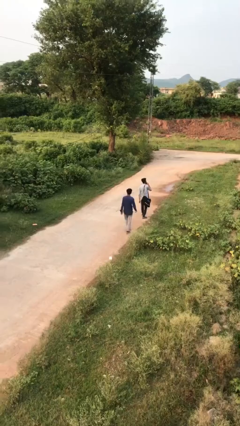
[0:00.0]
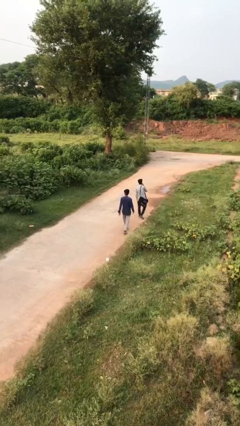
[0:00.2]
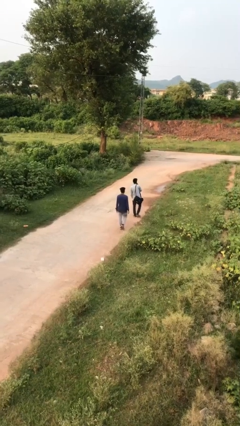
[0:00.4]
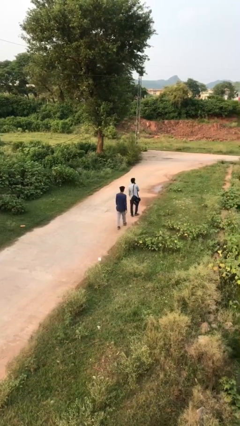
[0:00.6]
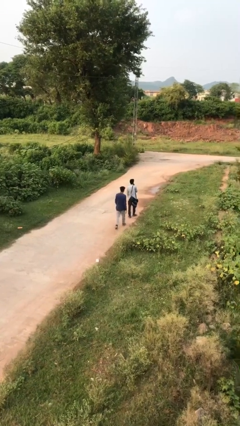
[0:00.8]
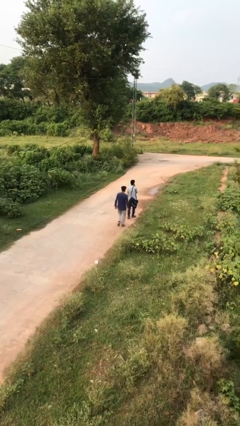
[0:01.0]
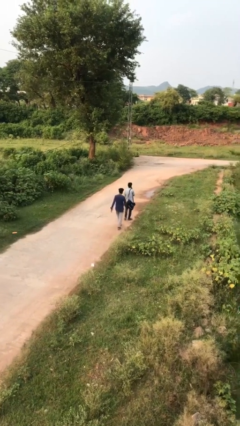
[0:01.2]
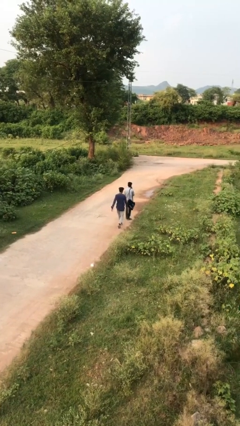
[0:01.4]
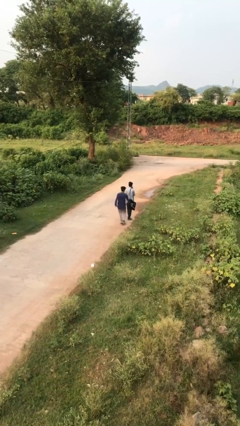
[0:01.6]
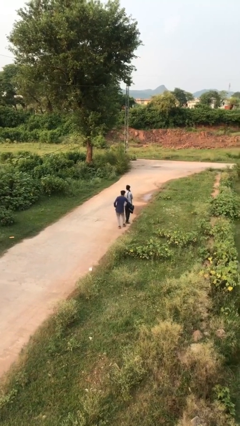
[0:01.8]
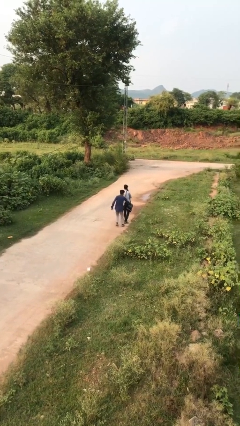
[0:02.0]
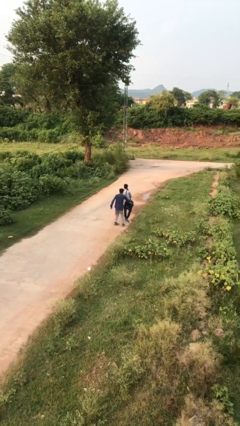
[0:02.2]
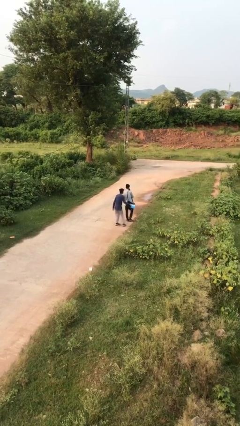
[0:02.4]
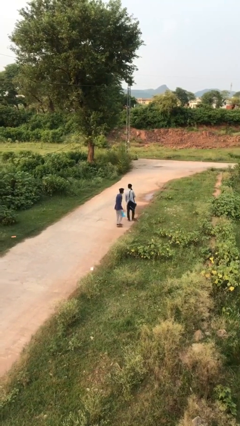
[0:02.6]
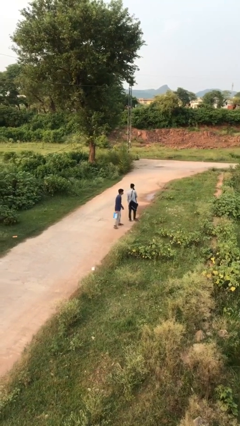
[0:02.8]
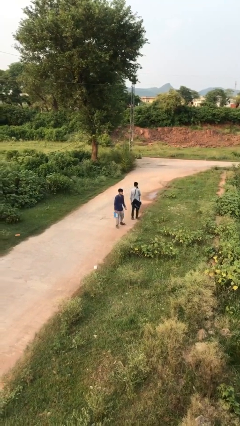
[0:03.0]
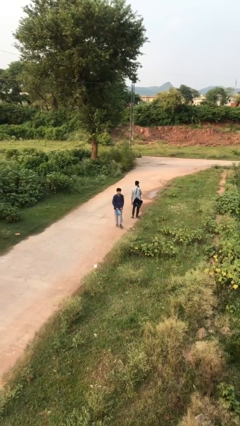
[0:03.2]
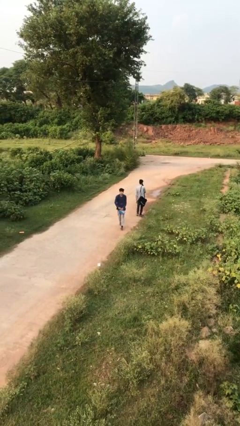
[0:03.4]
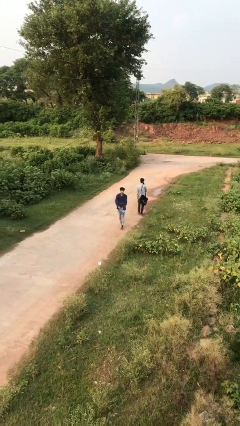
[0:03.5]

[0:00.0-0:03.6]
person steals object from person

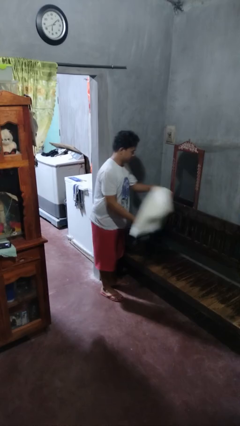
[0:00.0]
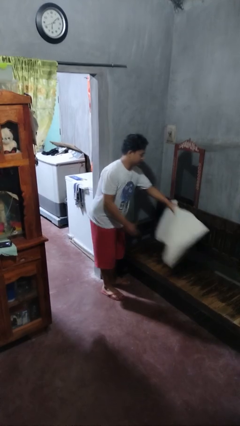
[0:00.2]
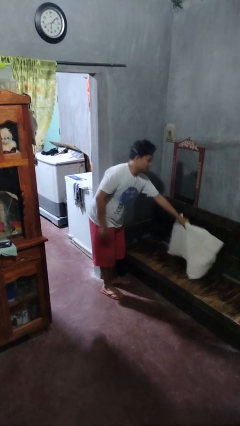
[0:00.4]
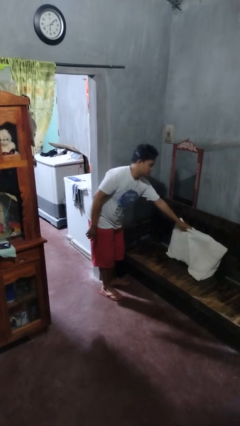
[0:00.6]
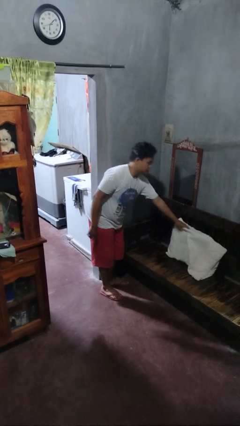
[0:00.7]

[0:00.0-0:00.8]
person puts down object on couch

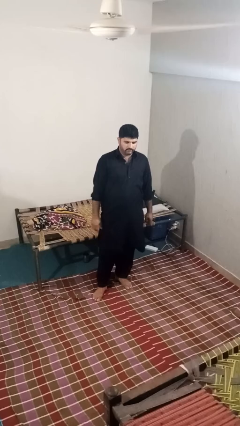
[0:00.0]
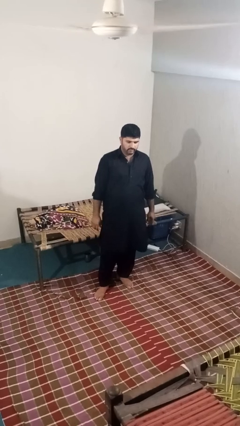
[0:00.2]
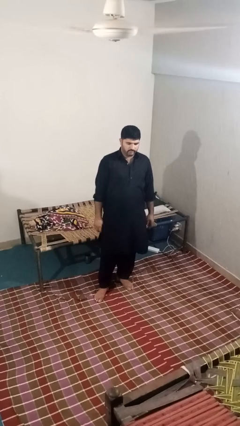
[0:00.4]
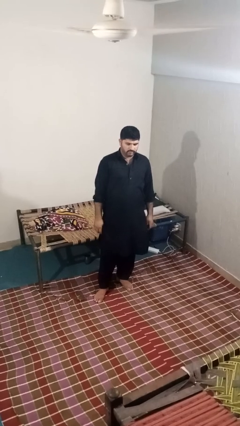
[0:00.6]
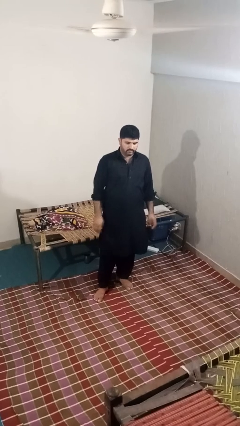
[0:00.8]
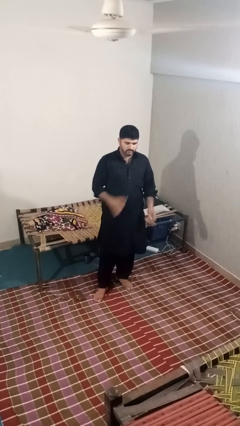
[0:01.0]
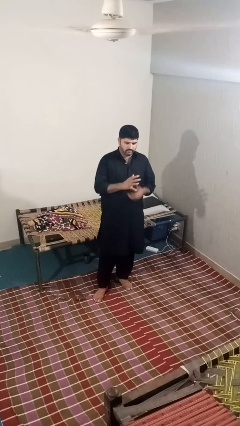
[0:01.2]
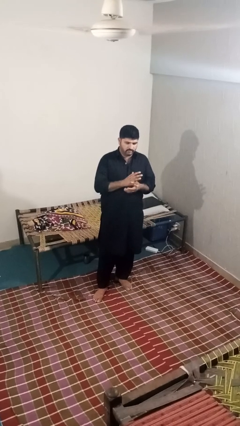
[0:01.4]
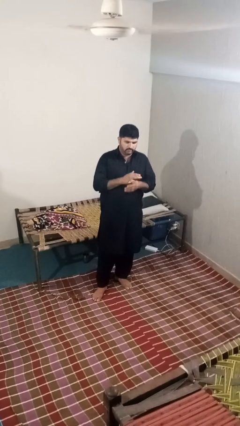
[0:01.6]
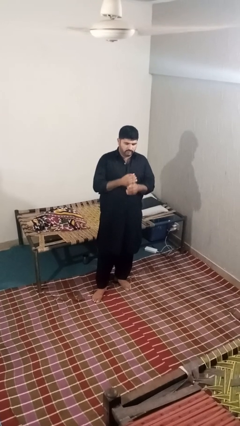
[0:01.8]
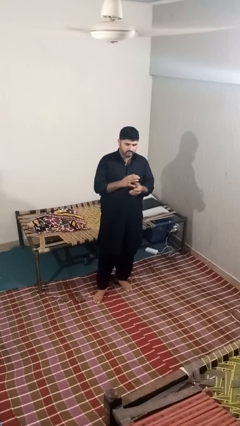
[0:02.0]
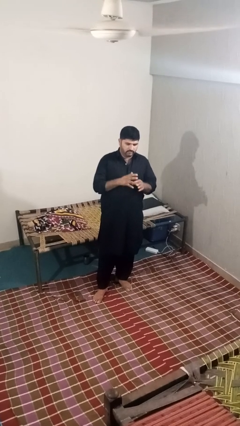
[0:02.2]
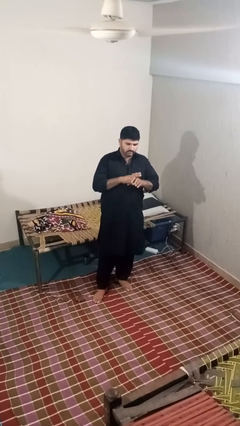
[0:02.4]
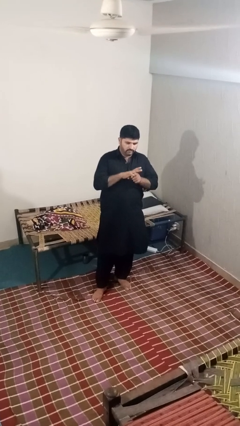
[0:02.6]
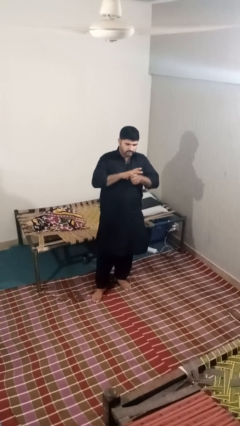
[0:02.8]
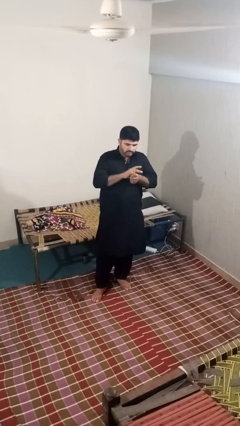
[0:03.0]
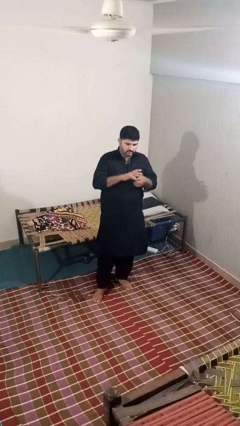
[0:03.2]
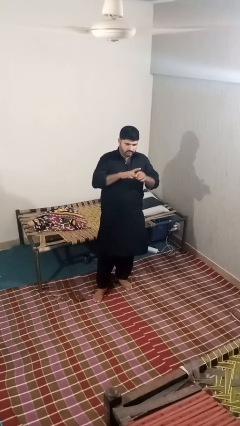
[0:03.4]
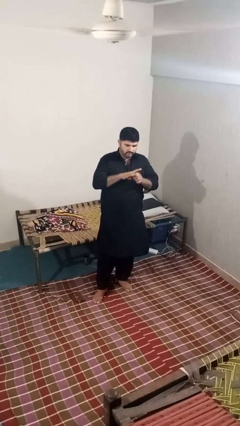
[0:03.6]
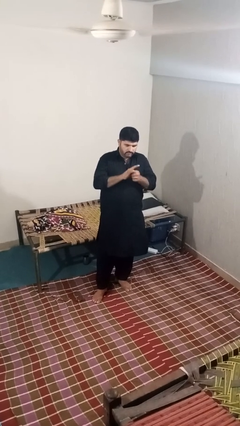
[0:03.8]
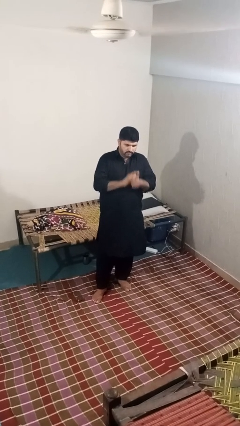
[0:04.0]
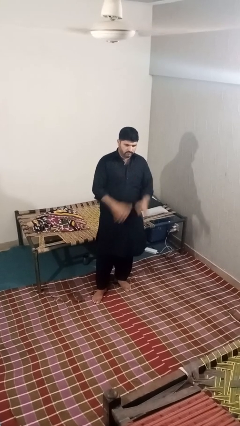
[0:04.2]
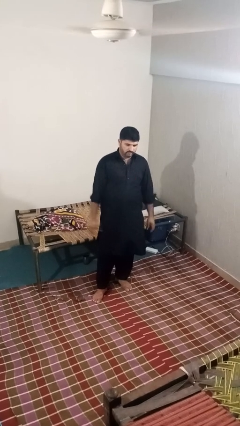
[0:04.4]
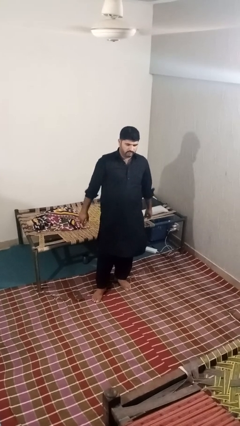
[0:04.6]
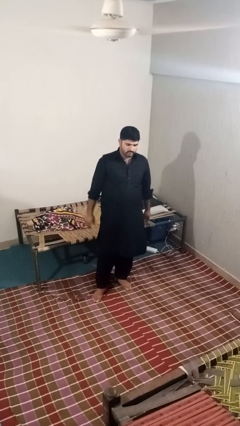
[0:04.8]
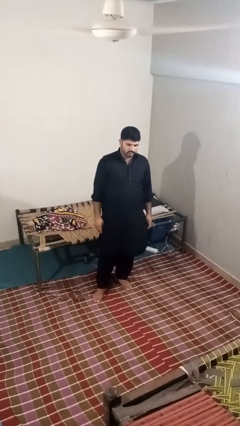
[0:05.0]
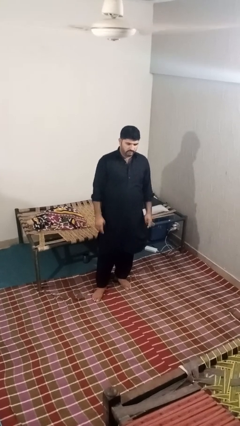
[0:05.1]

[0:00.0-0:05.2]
person cracks knuckles

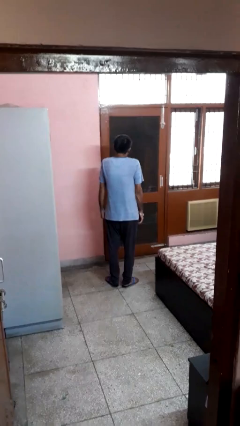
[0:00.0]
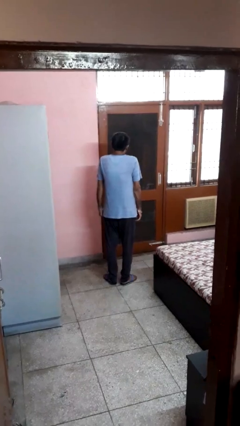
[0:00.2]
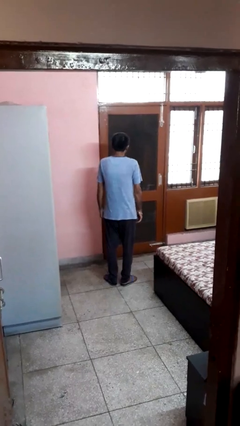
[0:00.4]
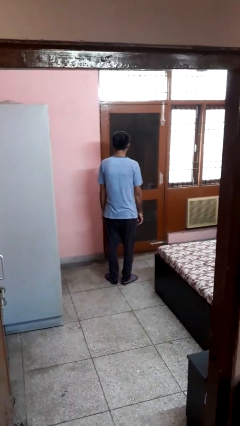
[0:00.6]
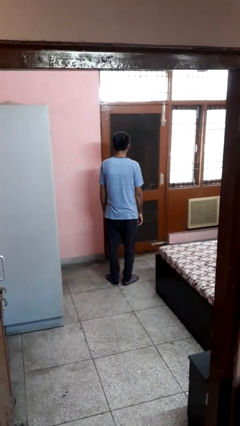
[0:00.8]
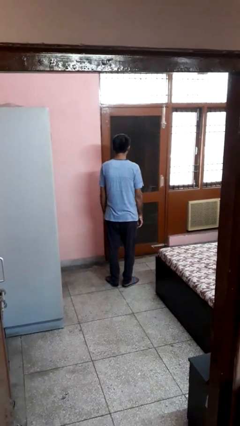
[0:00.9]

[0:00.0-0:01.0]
person shrugs

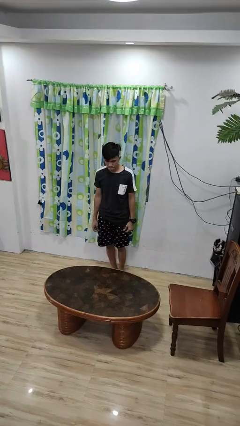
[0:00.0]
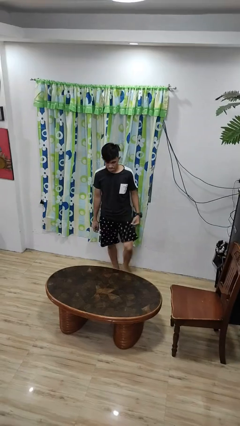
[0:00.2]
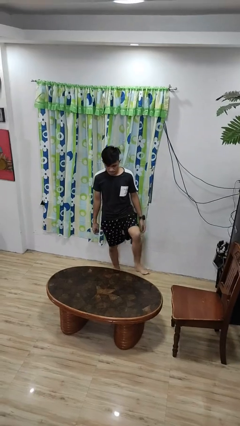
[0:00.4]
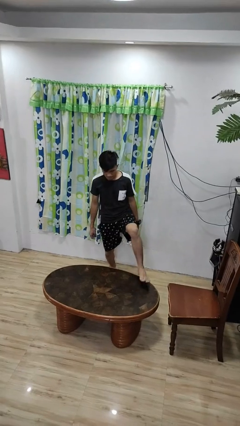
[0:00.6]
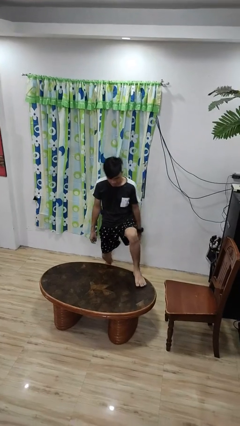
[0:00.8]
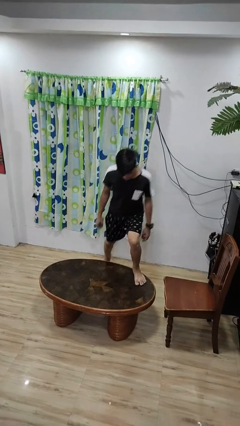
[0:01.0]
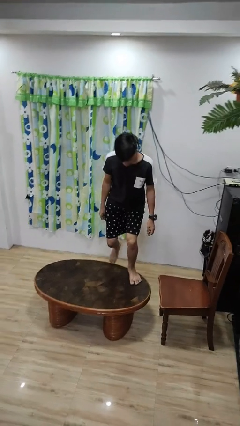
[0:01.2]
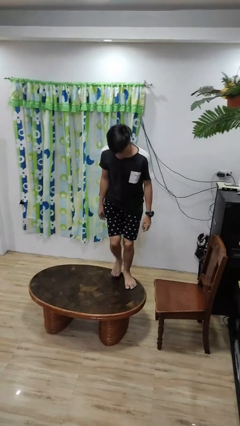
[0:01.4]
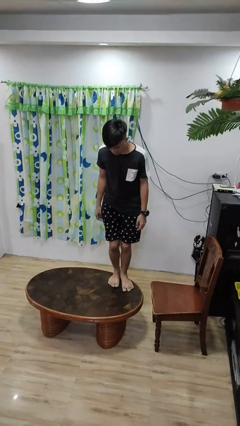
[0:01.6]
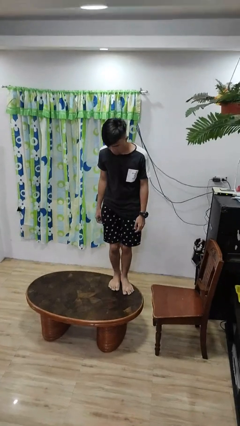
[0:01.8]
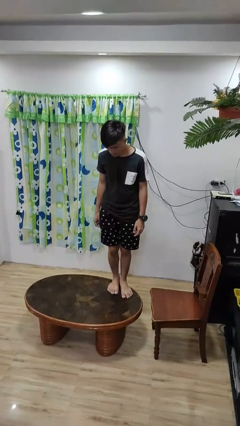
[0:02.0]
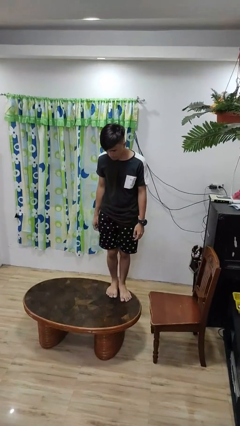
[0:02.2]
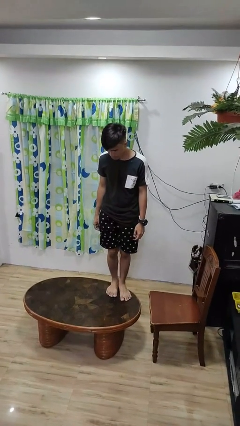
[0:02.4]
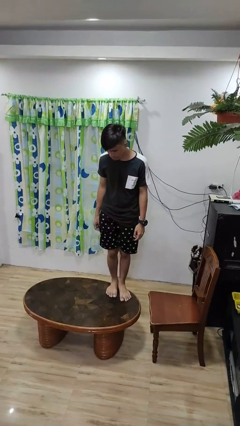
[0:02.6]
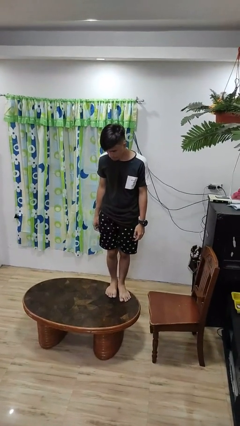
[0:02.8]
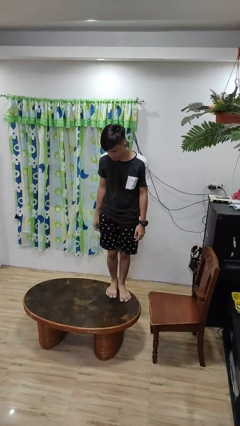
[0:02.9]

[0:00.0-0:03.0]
person climbs on table

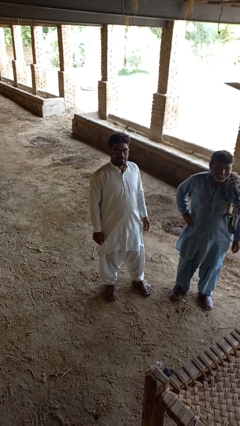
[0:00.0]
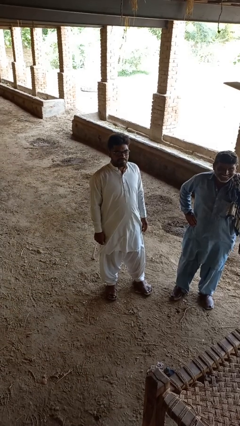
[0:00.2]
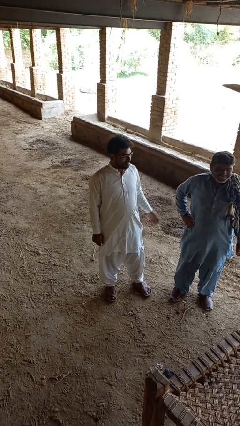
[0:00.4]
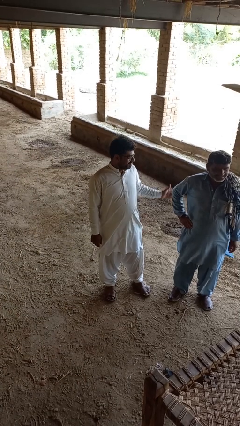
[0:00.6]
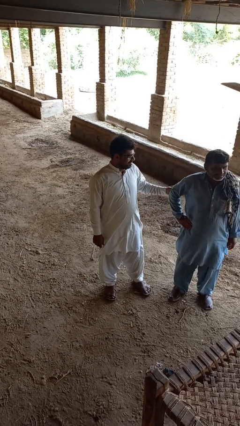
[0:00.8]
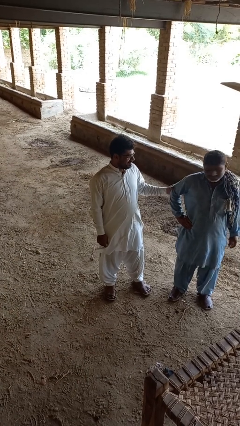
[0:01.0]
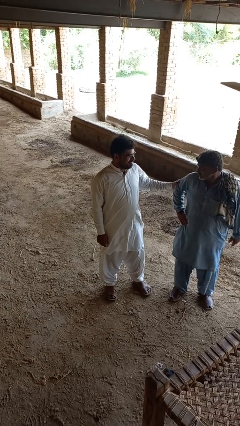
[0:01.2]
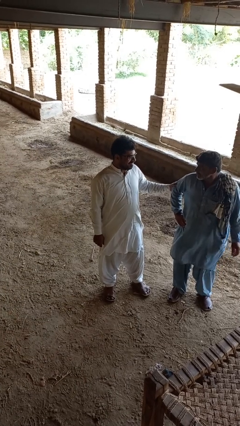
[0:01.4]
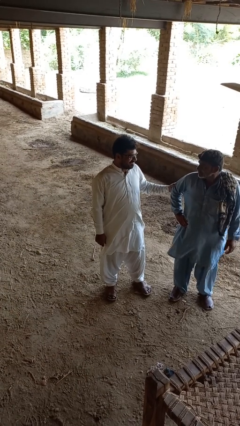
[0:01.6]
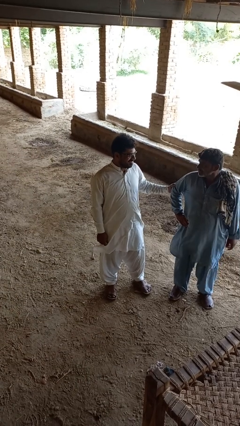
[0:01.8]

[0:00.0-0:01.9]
person grabs person by forearm

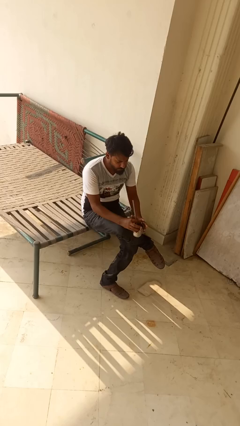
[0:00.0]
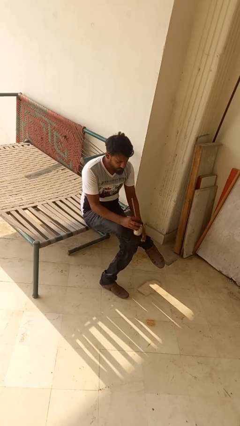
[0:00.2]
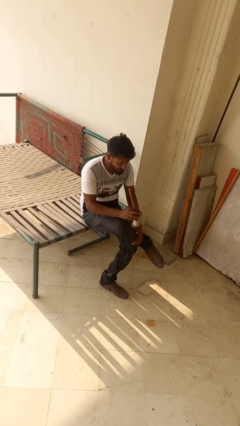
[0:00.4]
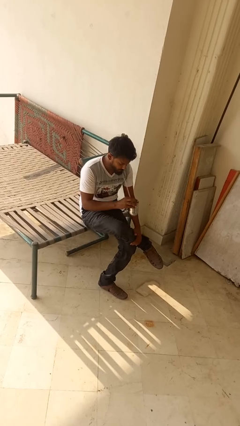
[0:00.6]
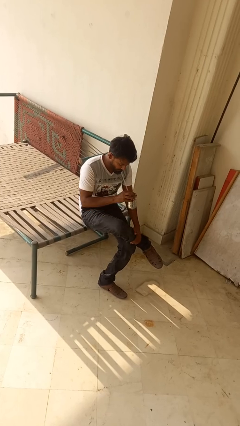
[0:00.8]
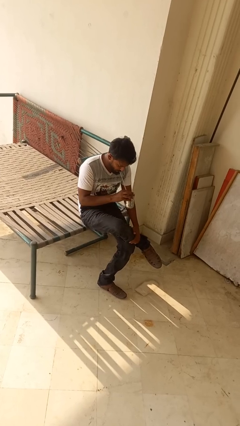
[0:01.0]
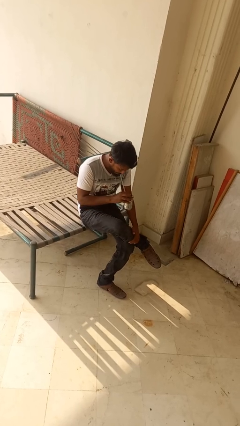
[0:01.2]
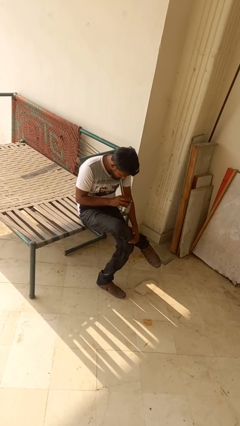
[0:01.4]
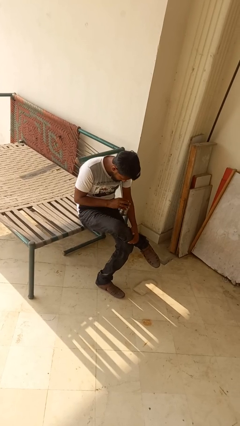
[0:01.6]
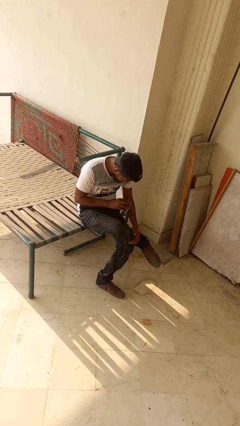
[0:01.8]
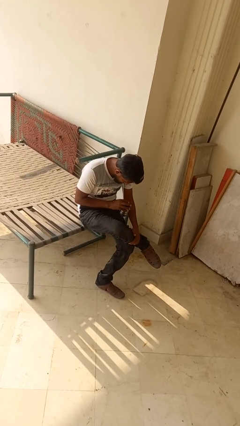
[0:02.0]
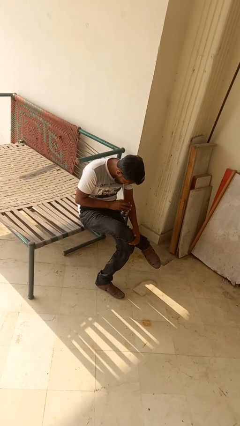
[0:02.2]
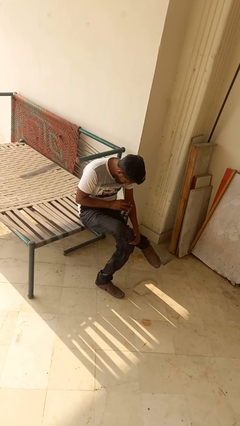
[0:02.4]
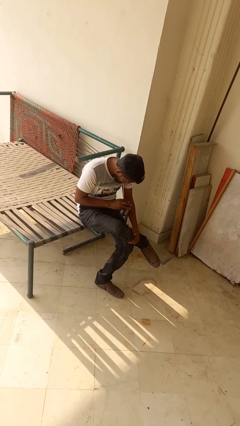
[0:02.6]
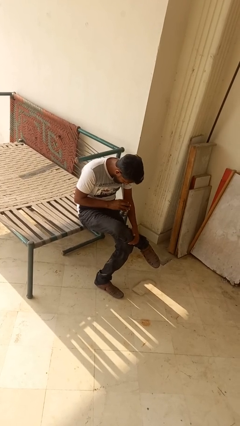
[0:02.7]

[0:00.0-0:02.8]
person drinks from straw
